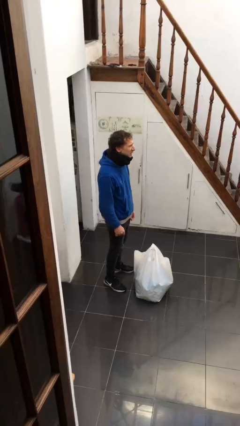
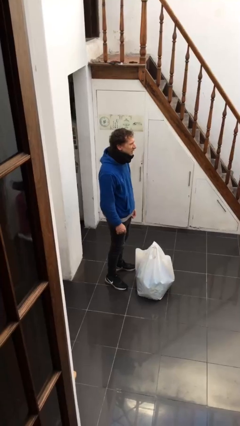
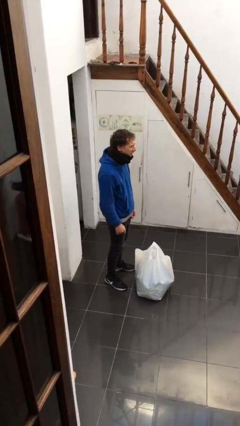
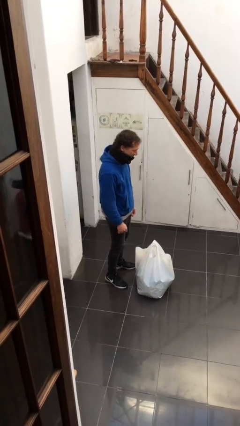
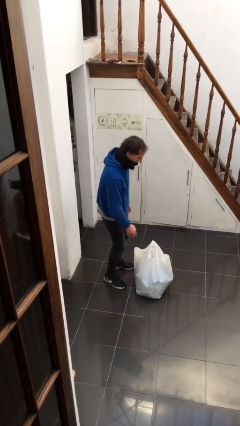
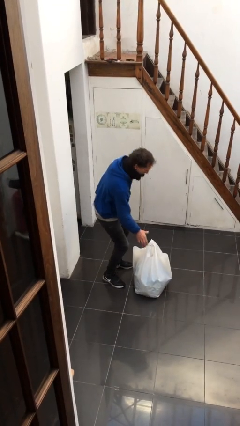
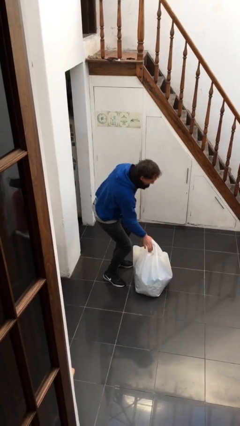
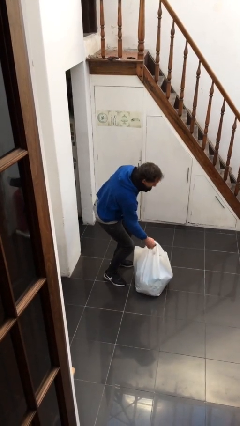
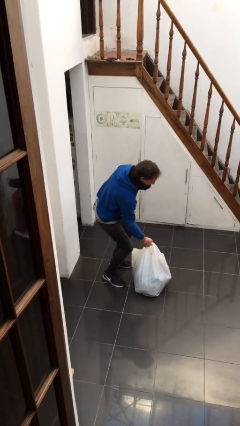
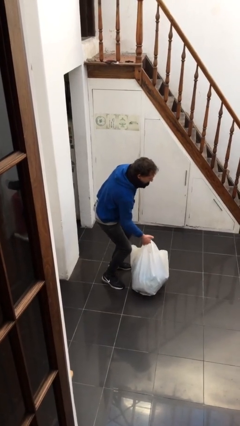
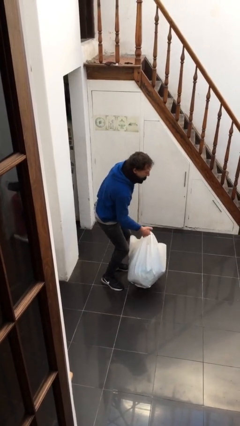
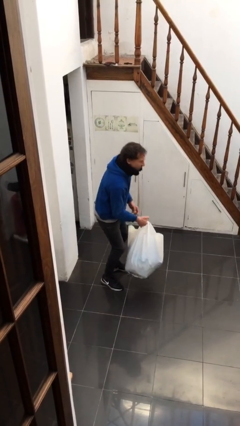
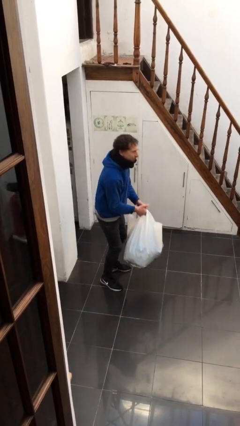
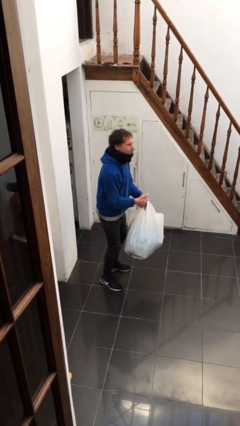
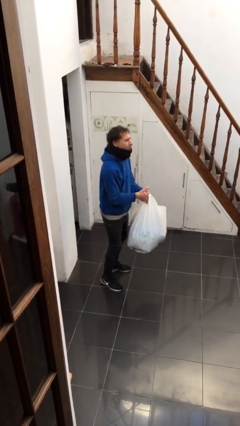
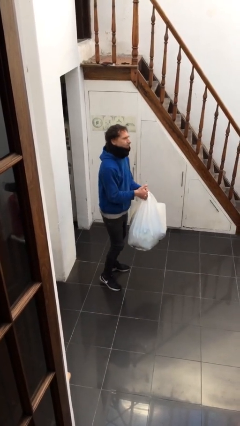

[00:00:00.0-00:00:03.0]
person picks up object from floor

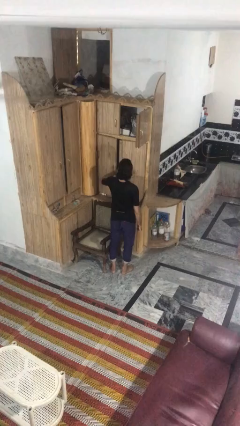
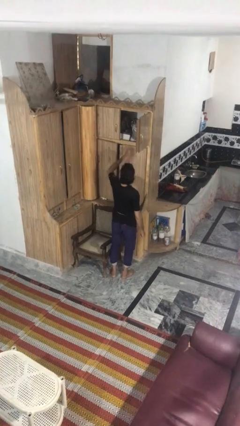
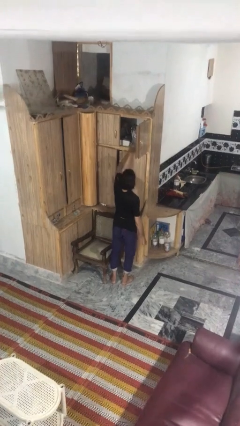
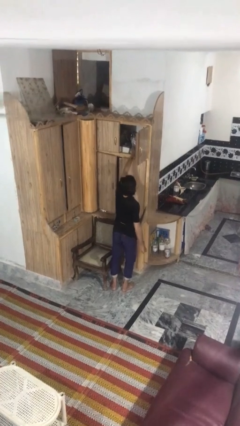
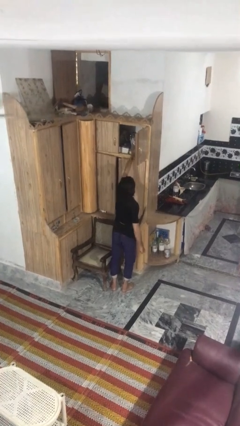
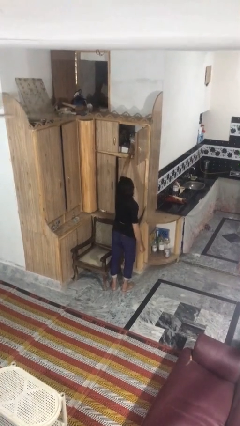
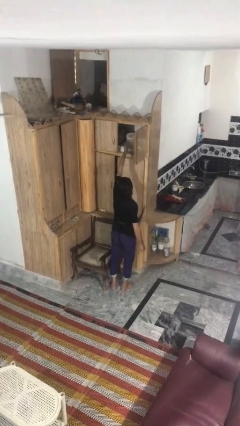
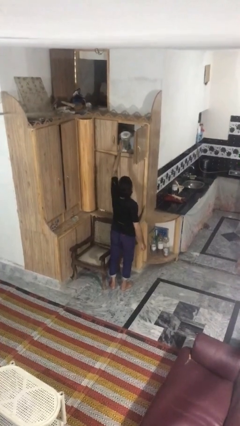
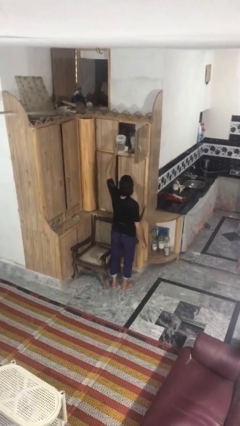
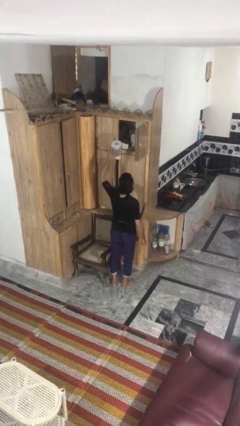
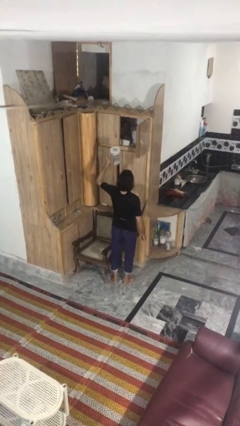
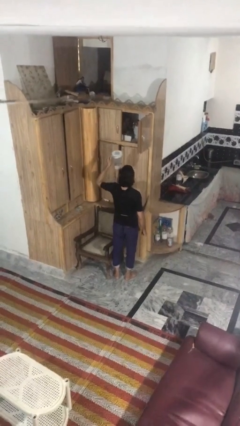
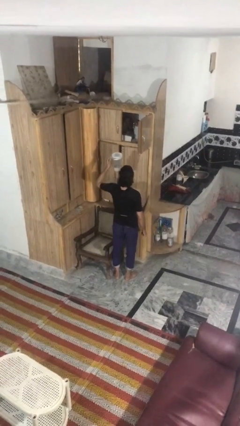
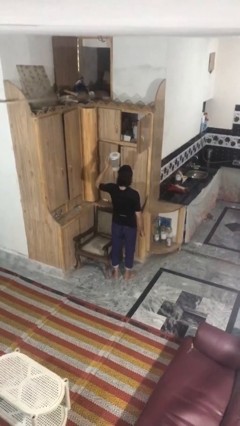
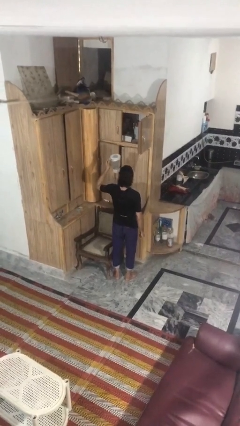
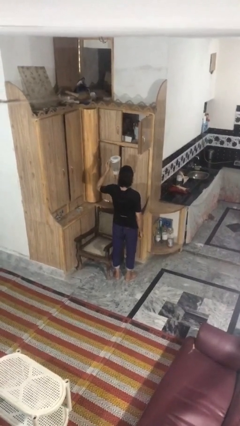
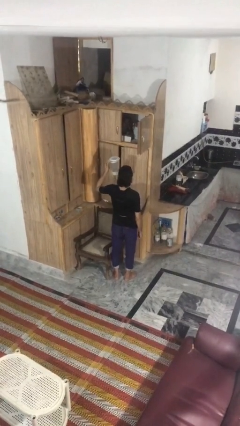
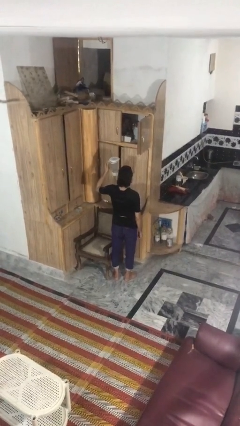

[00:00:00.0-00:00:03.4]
person picks up object from shelf

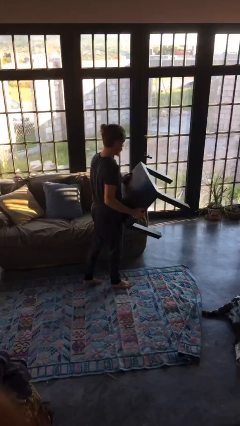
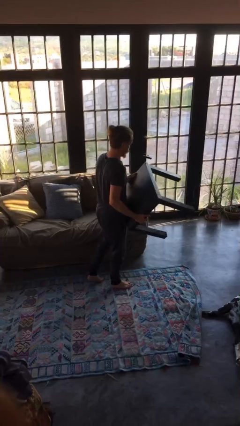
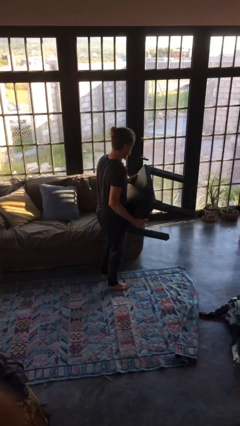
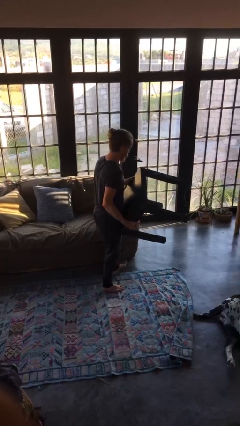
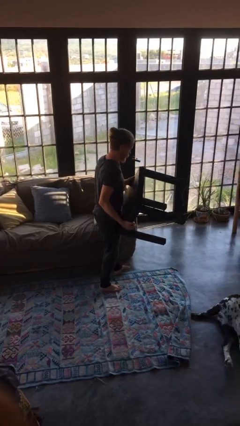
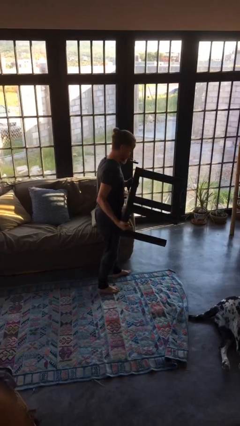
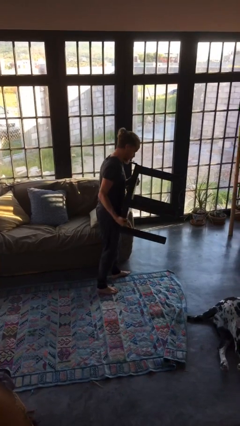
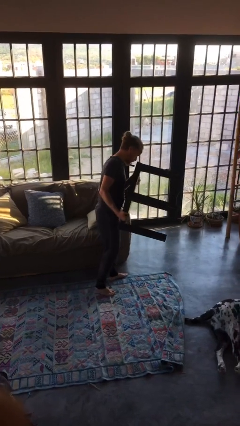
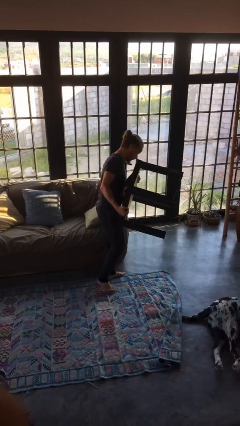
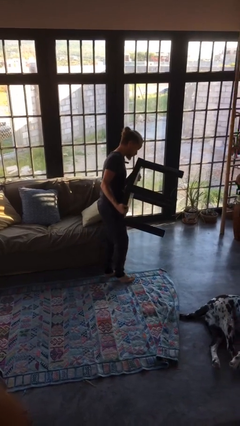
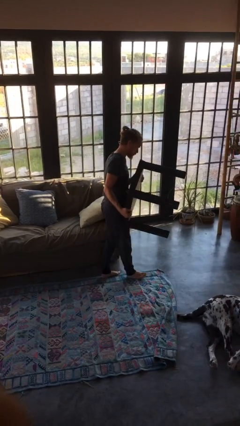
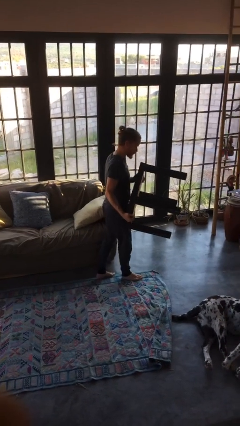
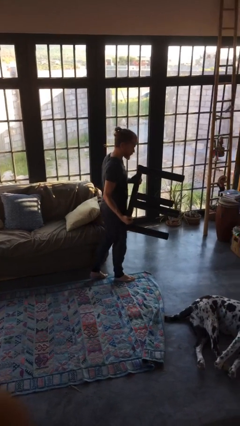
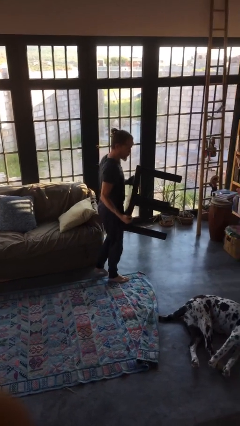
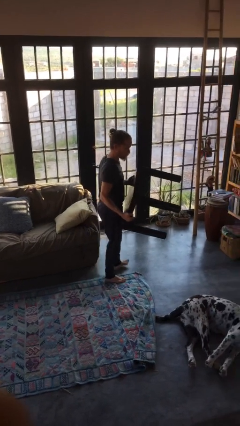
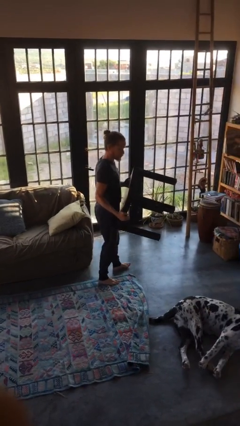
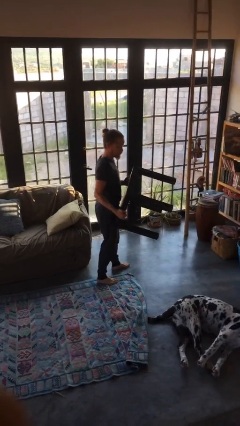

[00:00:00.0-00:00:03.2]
person carries furniture

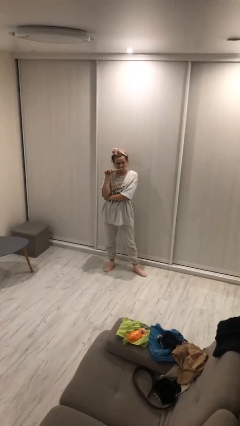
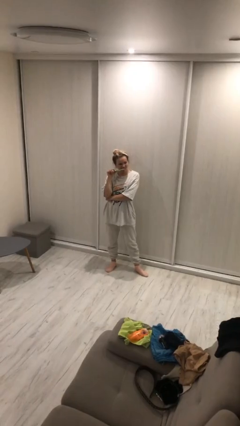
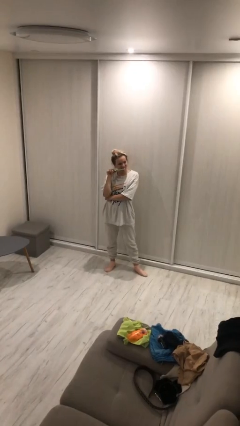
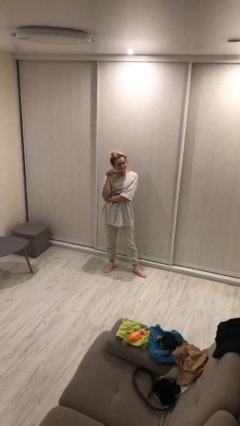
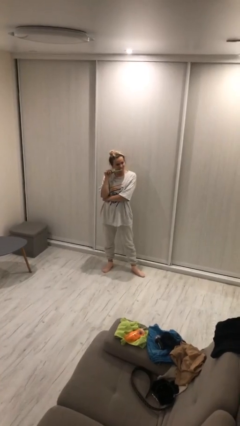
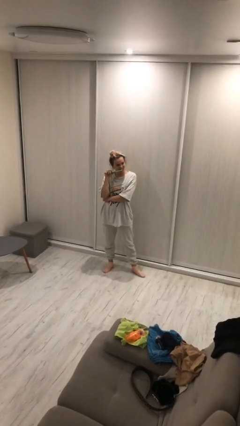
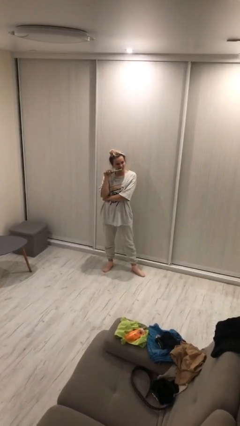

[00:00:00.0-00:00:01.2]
person brushes teeth

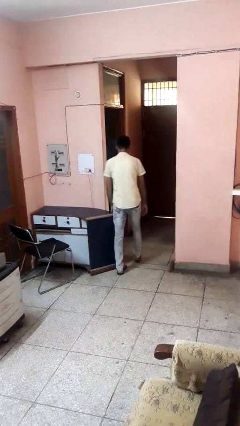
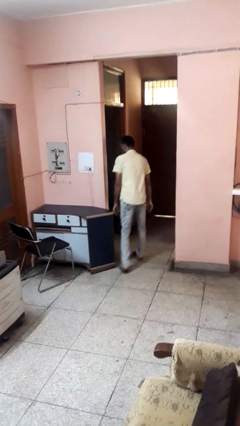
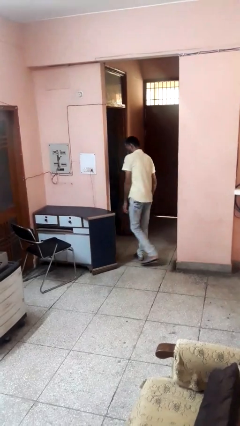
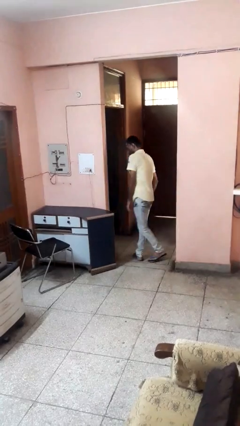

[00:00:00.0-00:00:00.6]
person bumps into table

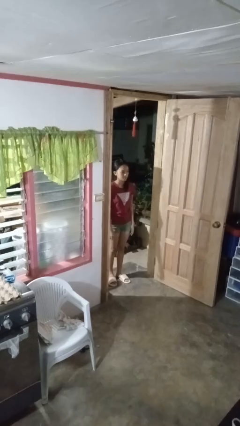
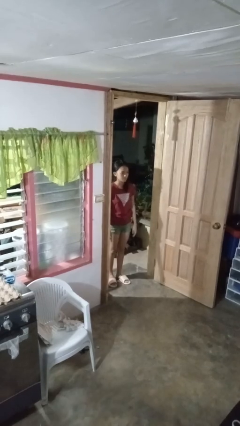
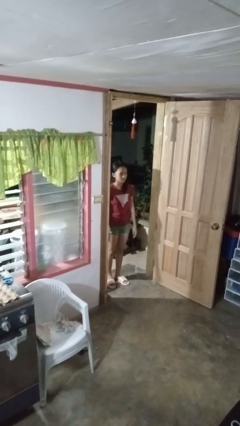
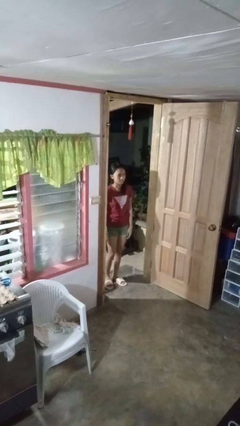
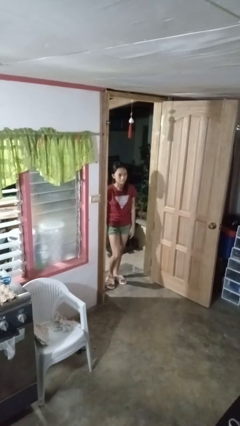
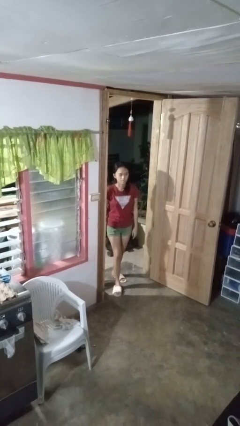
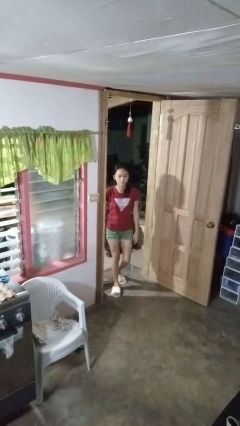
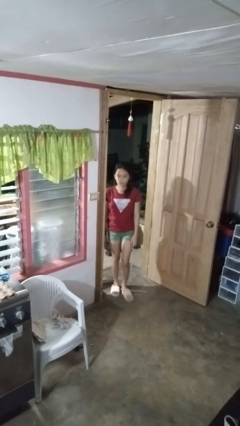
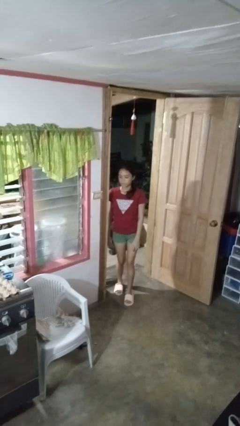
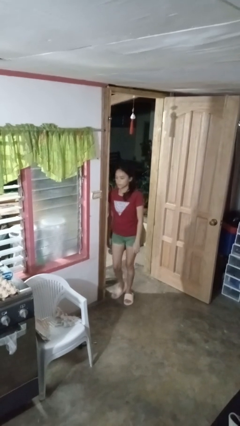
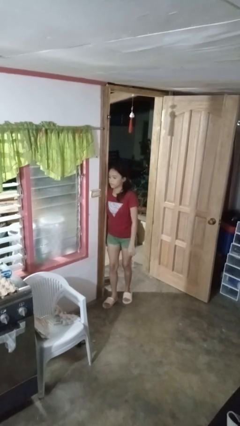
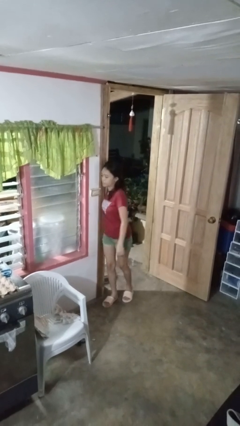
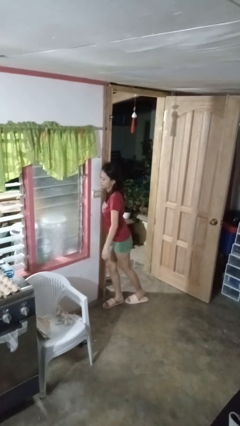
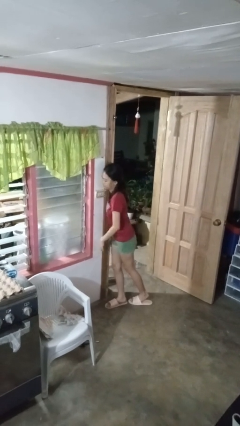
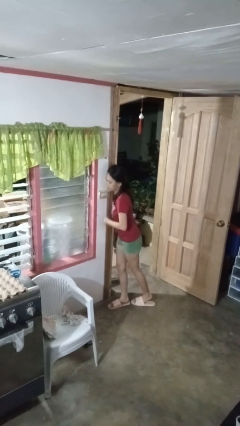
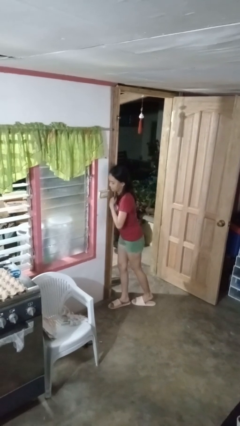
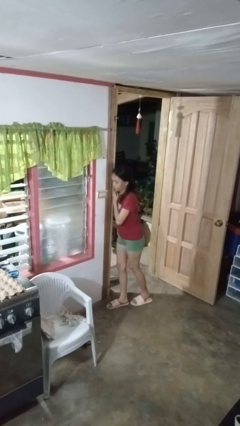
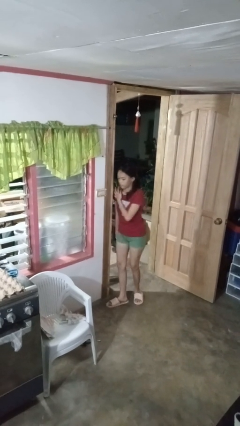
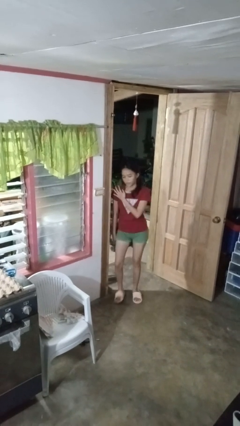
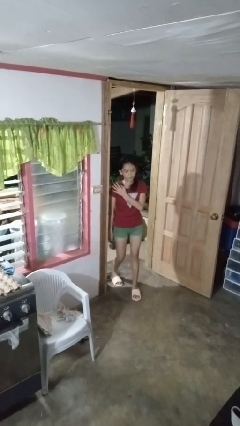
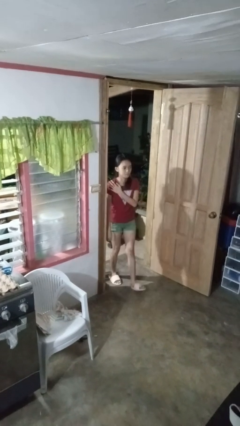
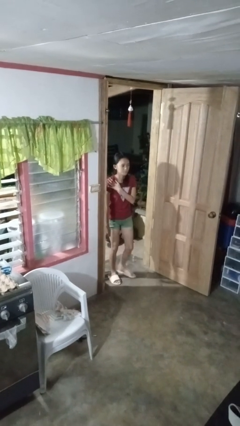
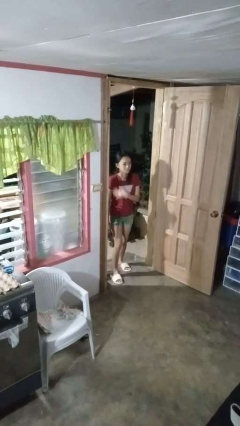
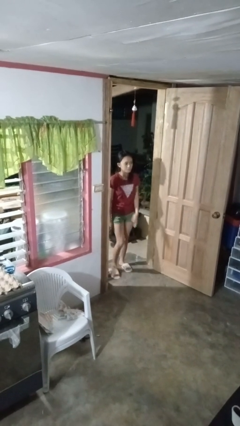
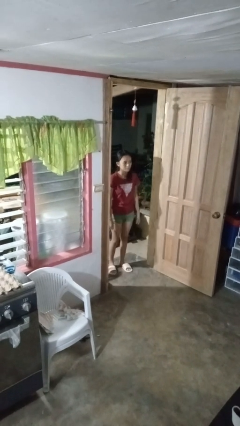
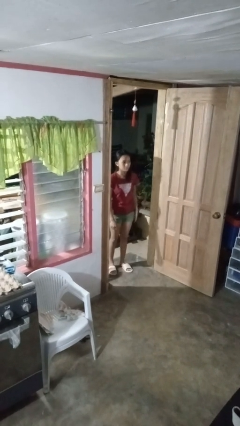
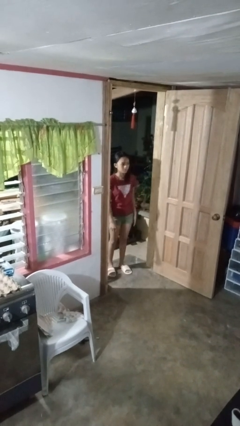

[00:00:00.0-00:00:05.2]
person bumps into wall

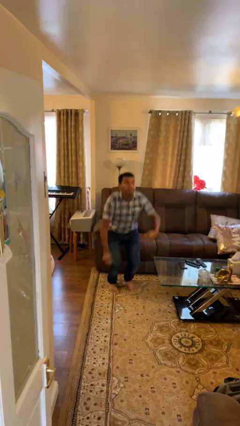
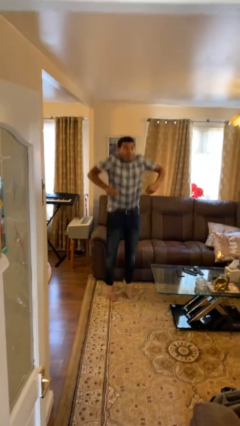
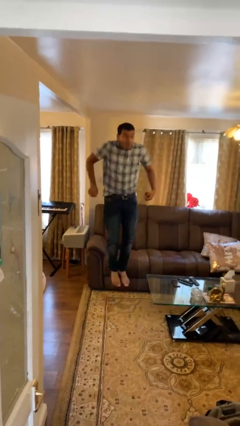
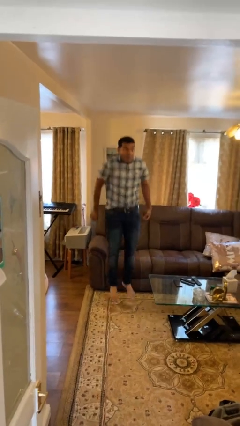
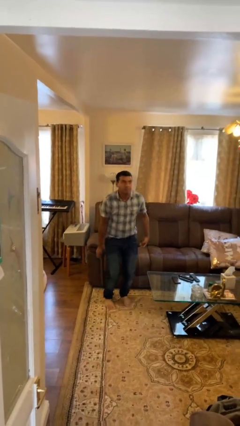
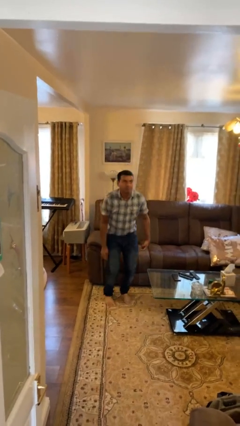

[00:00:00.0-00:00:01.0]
person jumps
